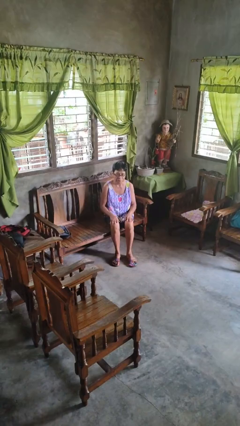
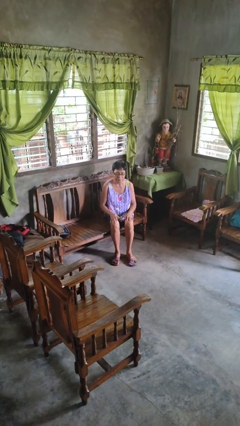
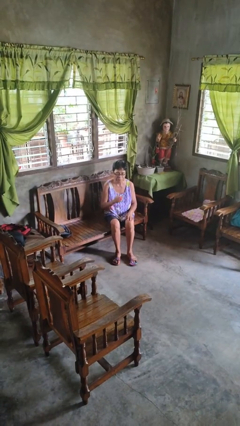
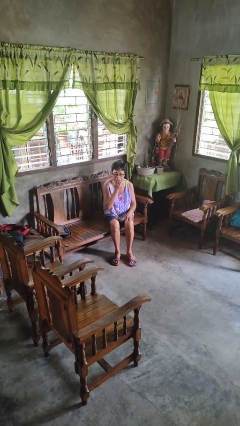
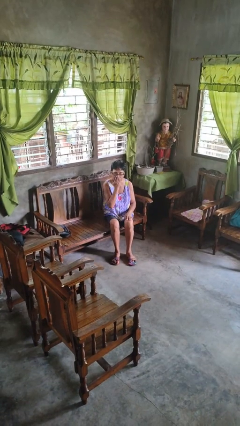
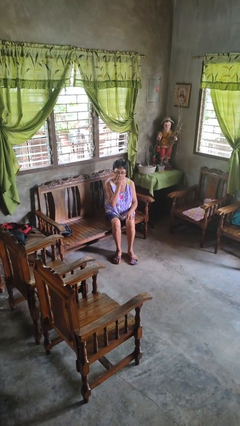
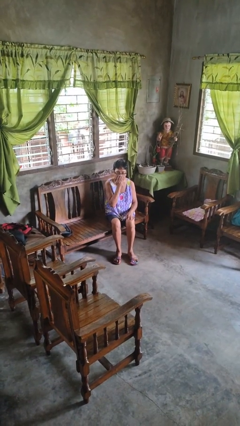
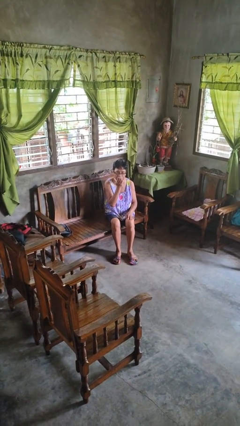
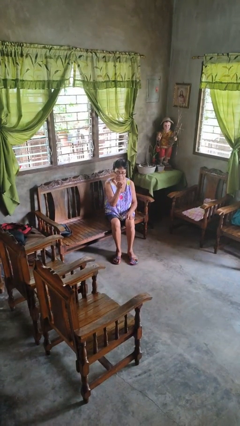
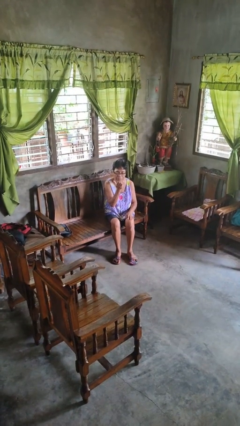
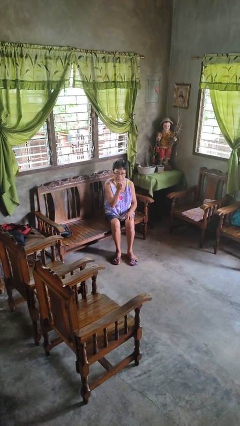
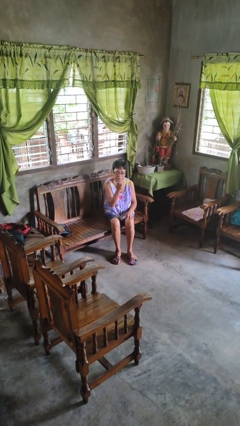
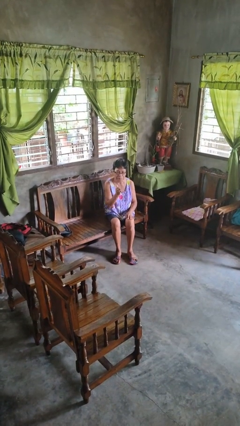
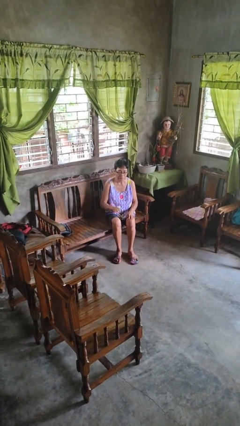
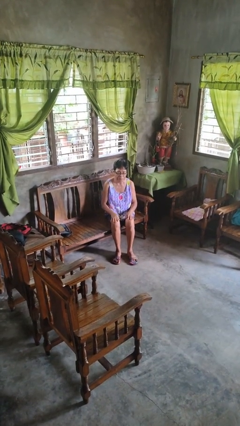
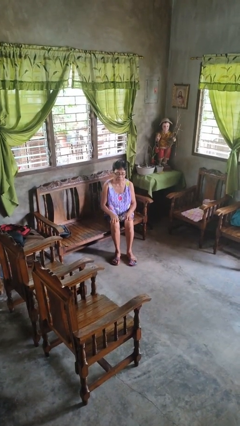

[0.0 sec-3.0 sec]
person gestures blow kiss

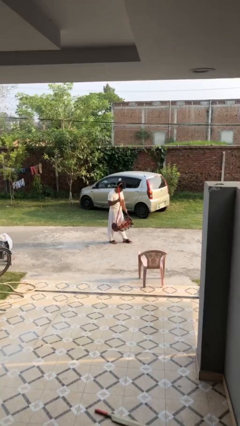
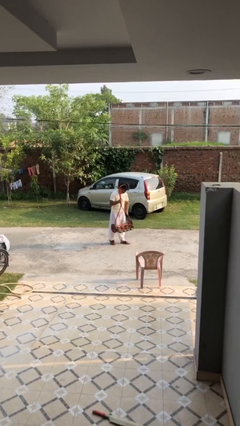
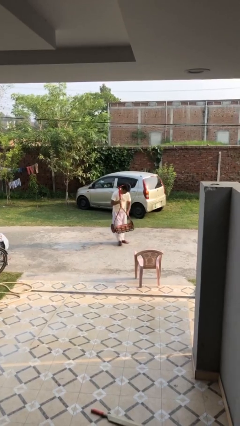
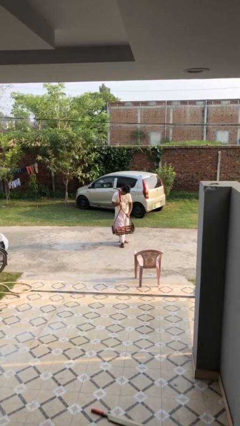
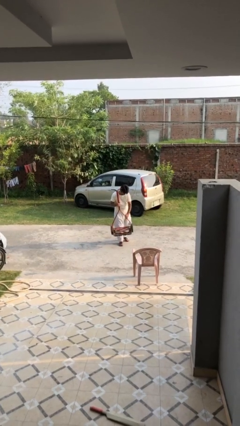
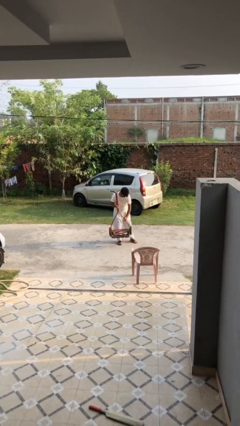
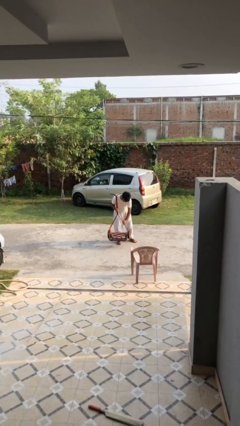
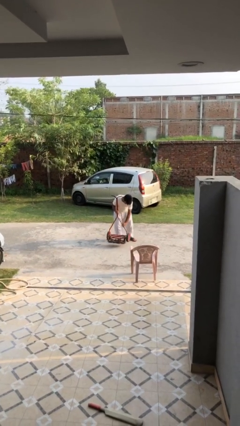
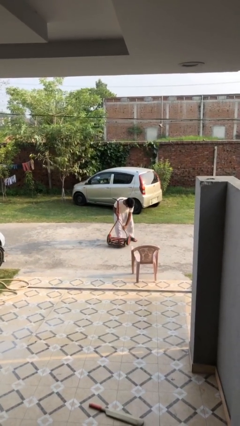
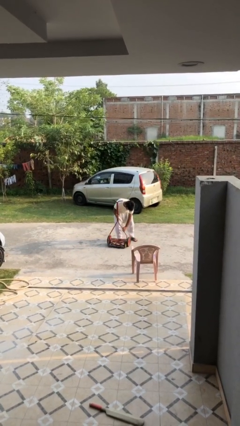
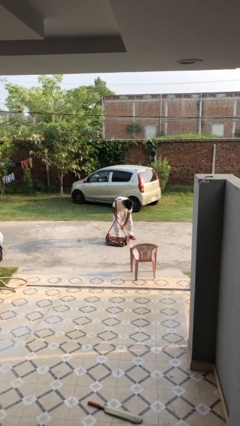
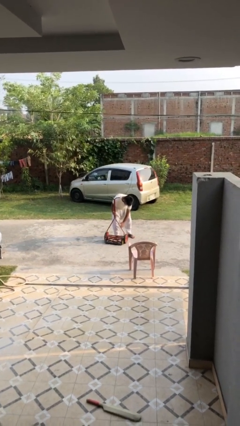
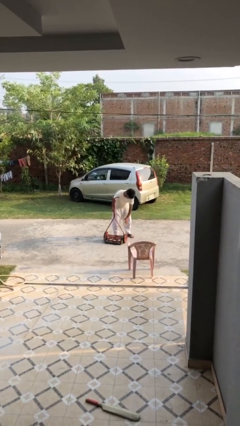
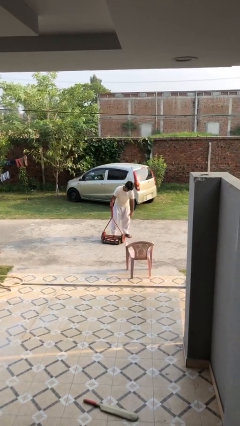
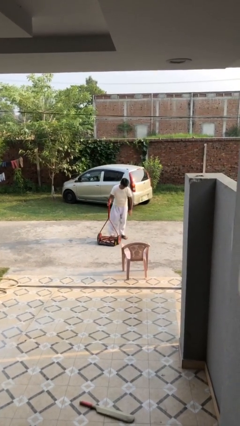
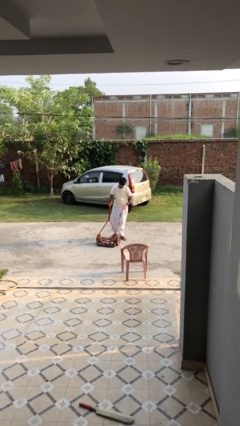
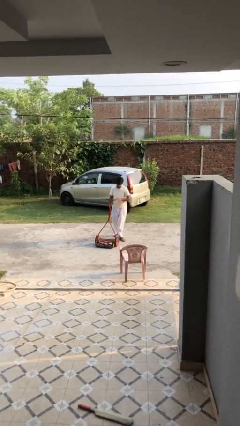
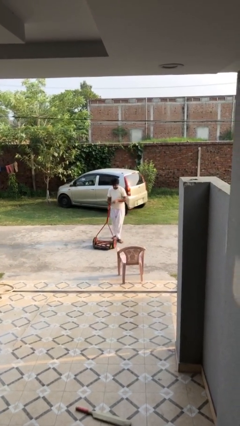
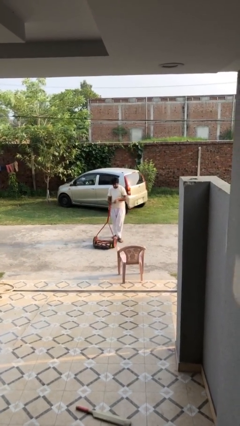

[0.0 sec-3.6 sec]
person puts down object on floor

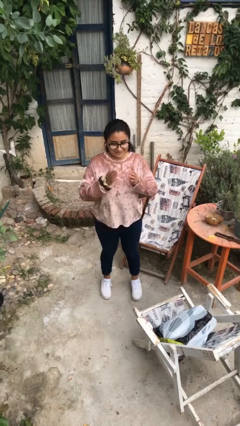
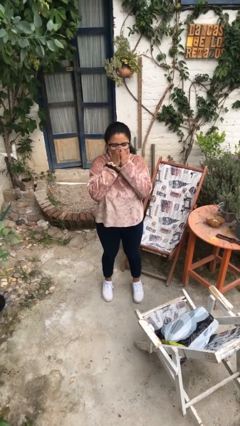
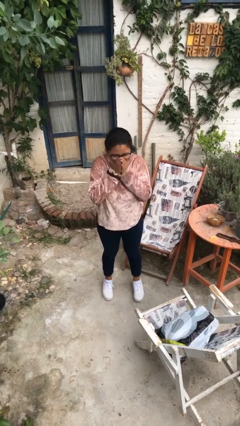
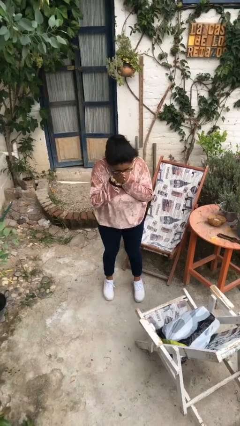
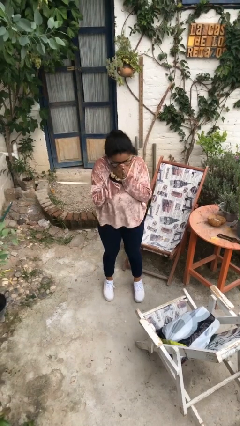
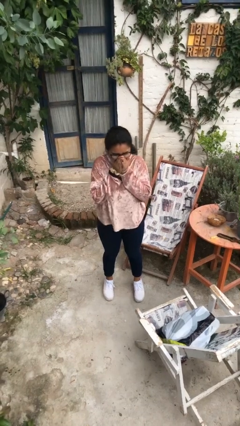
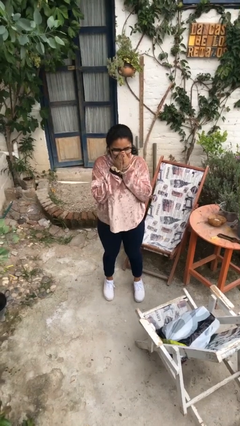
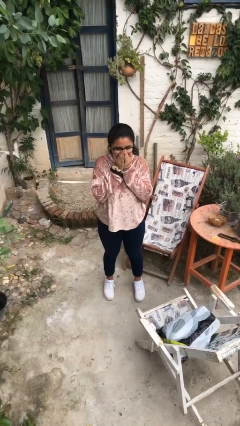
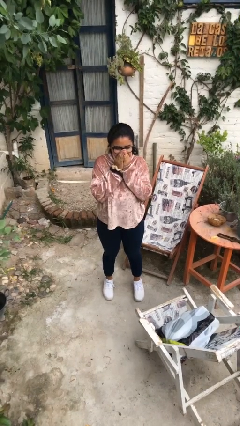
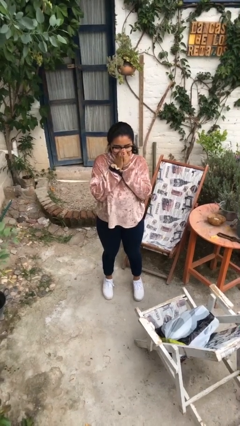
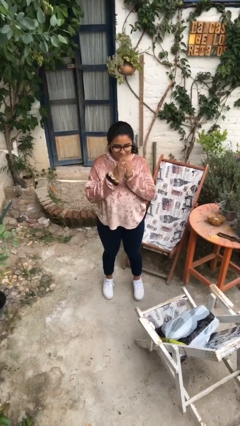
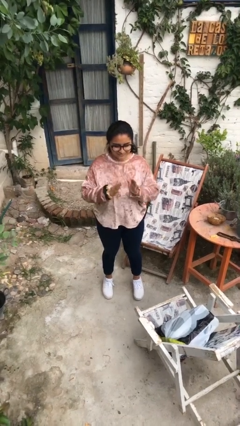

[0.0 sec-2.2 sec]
person sneezes into hand

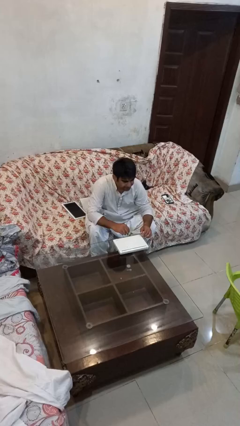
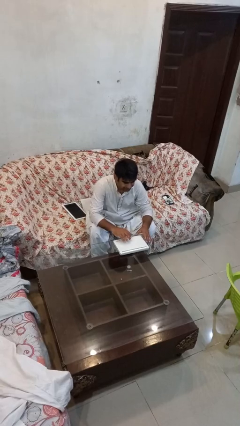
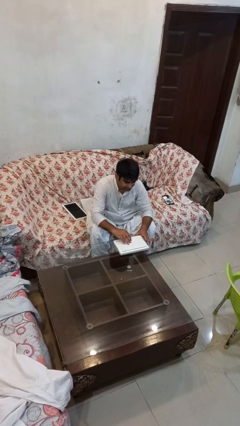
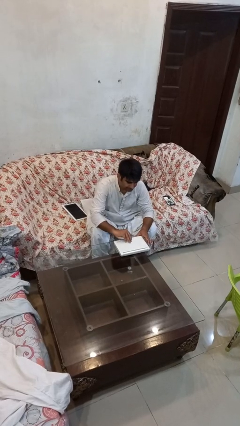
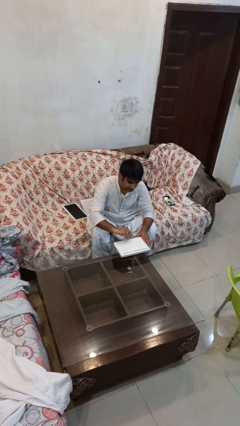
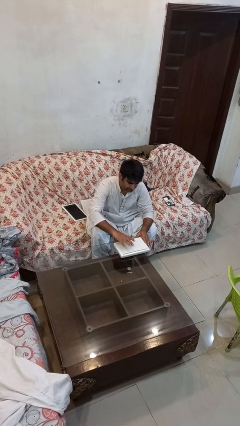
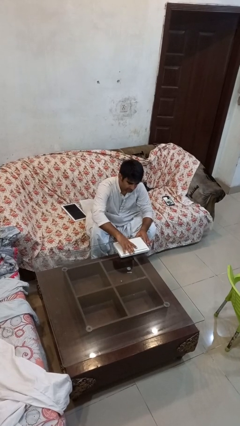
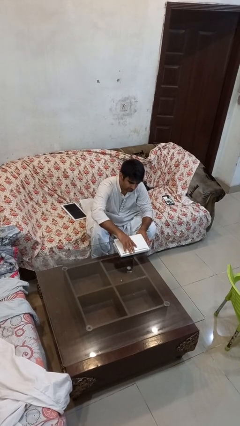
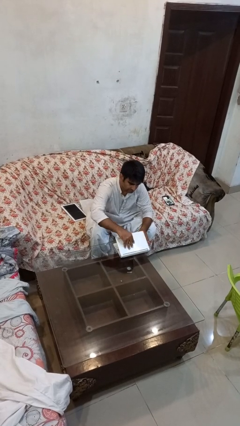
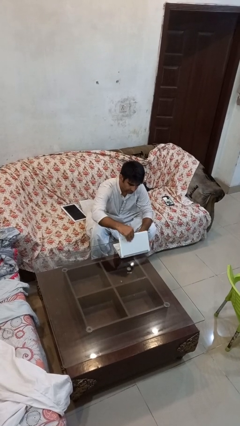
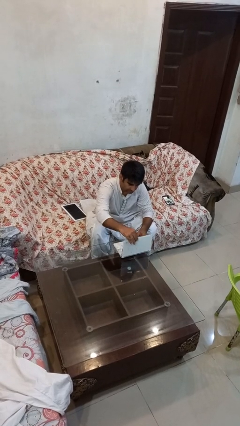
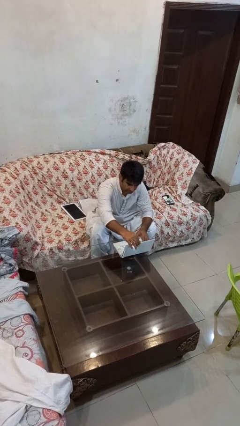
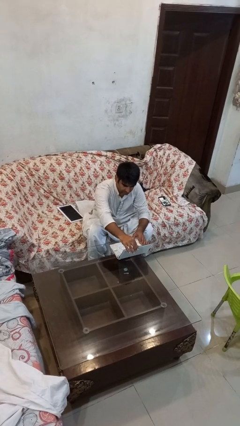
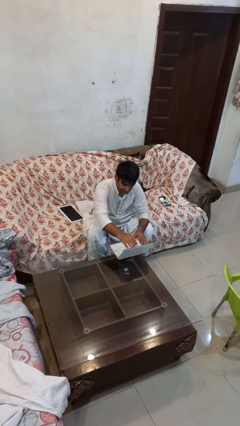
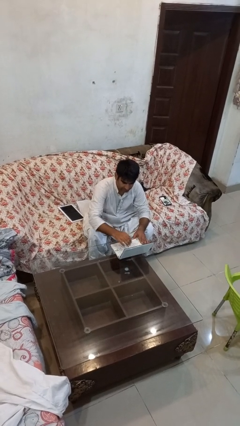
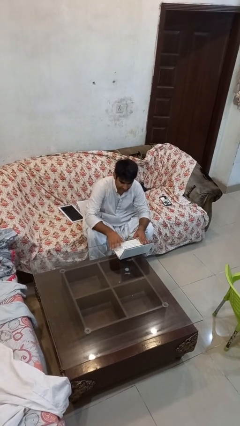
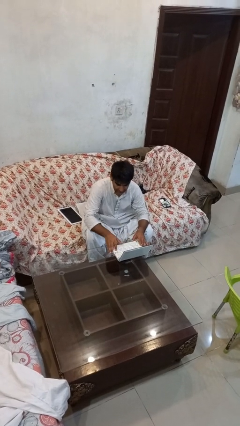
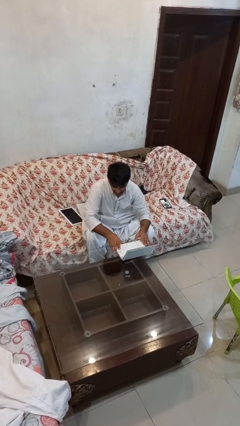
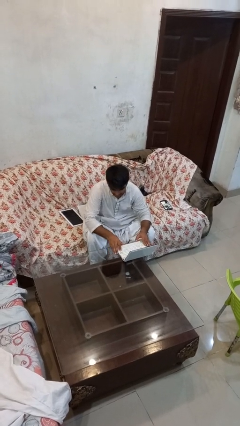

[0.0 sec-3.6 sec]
person opens laptop

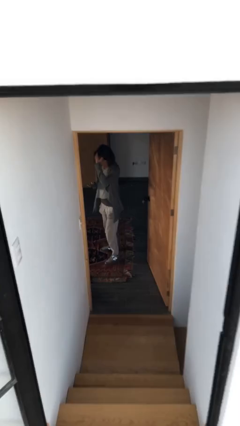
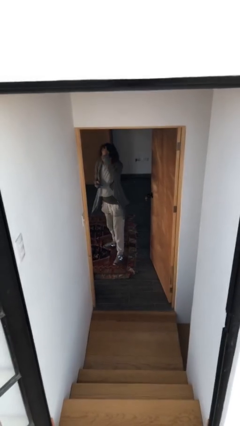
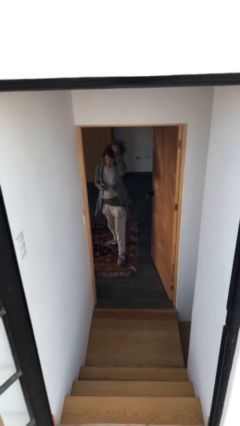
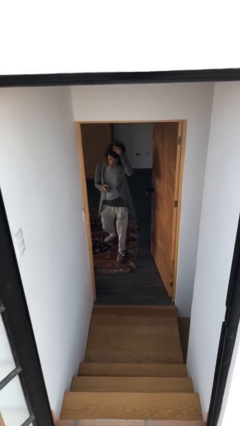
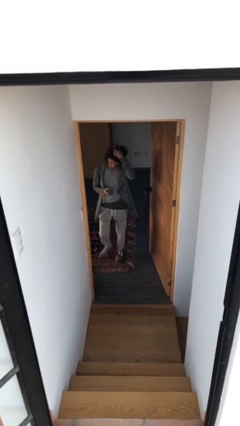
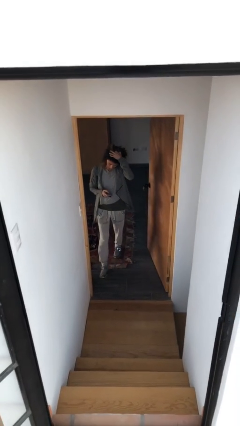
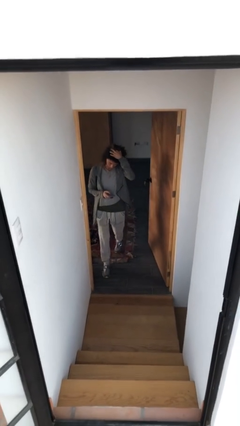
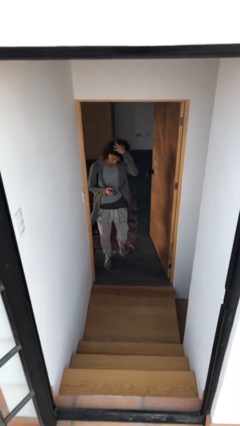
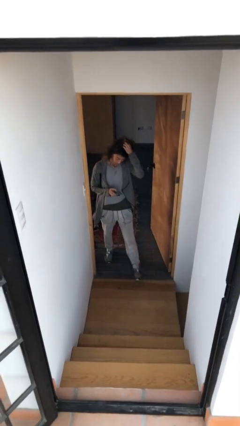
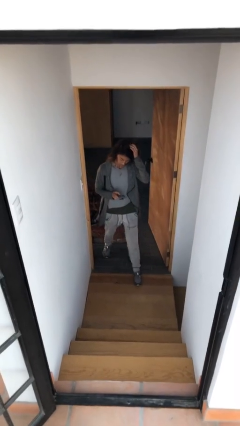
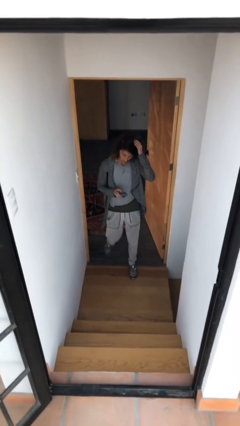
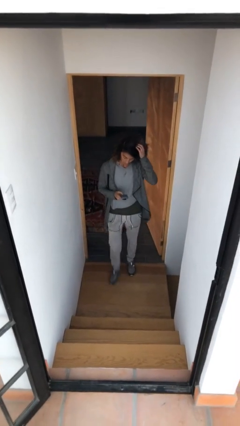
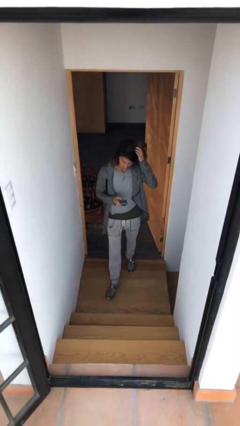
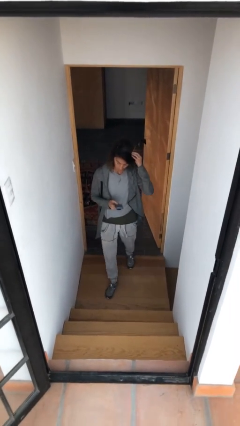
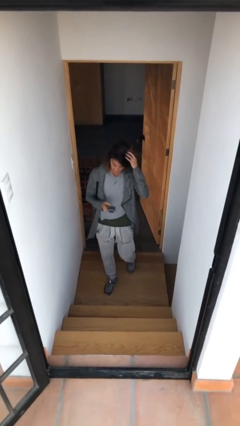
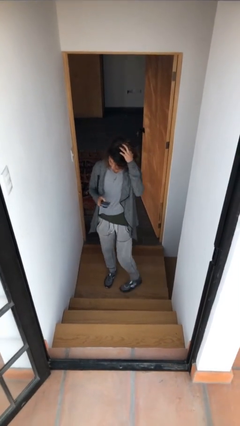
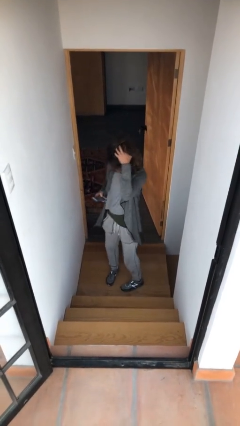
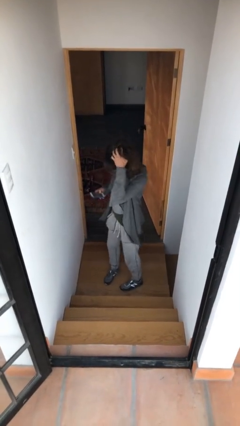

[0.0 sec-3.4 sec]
person enters scene through structure

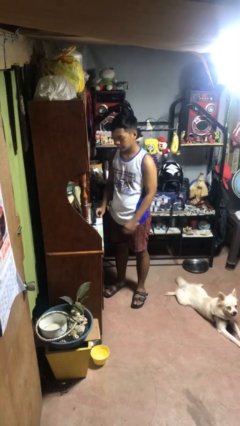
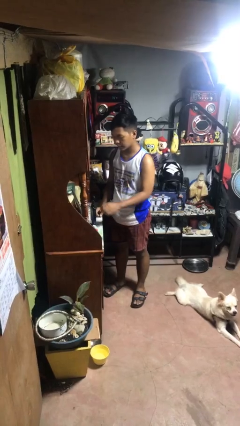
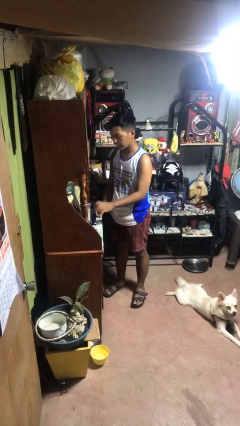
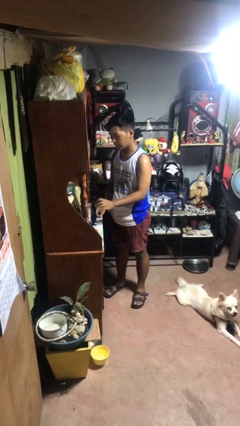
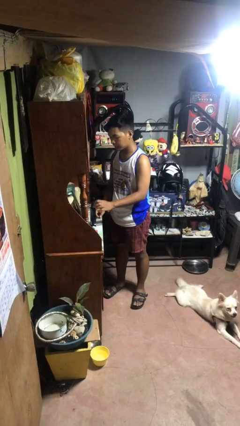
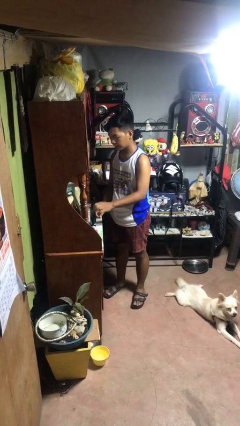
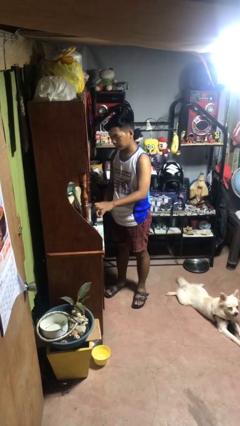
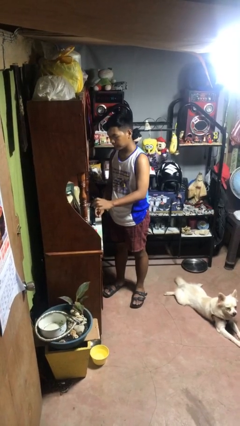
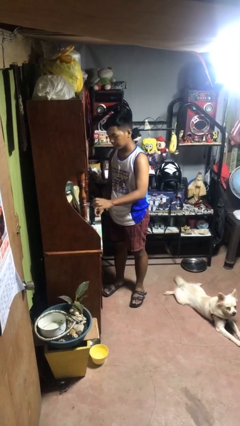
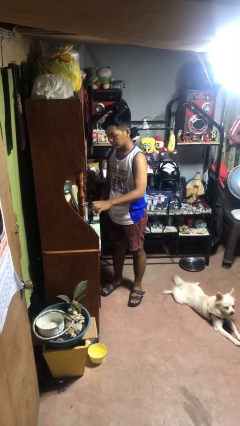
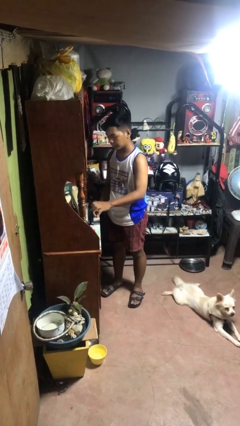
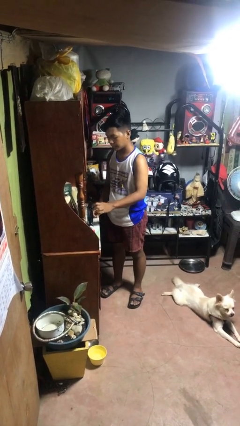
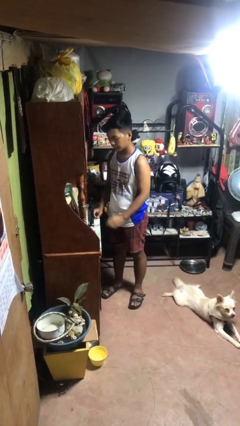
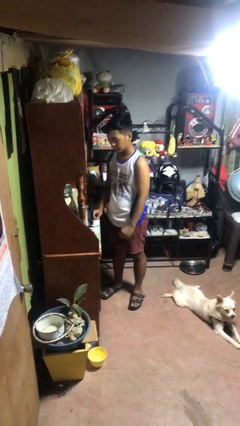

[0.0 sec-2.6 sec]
person taps object with finger
